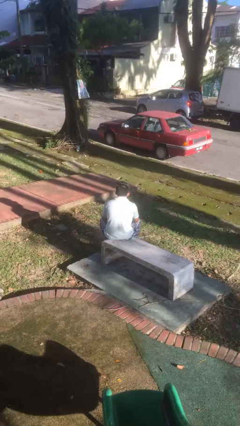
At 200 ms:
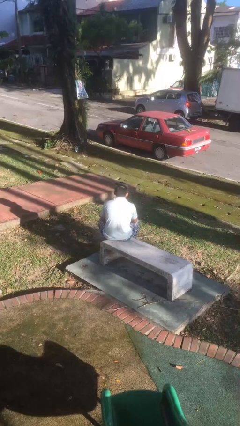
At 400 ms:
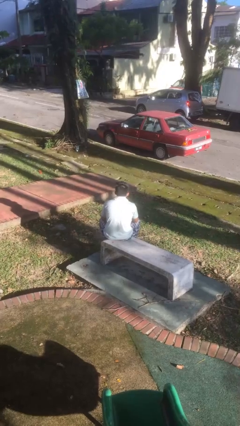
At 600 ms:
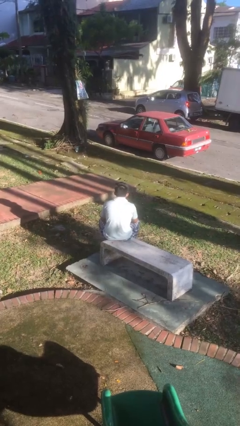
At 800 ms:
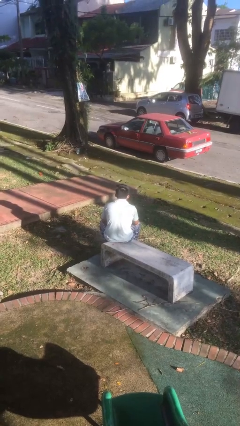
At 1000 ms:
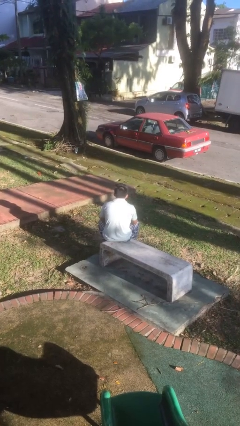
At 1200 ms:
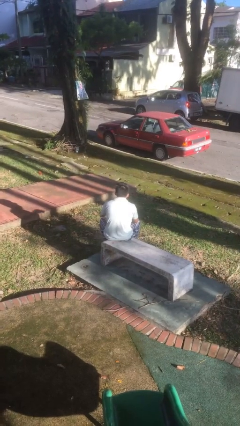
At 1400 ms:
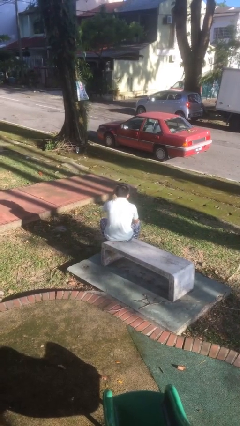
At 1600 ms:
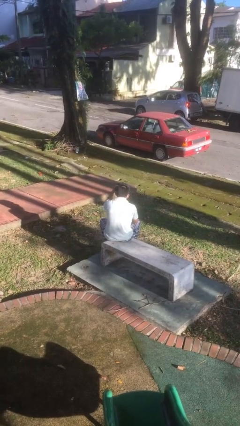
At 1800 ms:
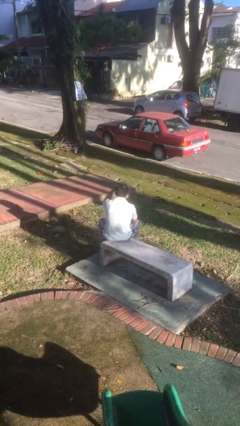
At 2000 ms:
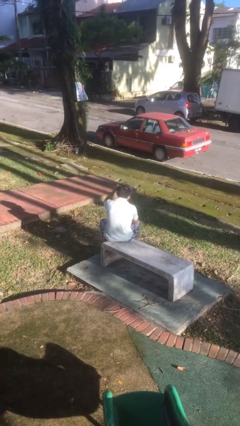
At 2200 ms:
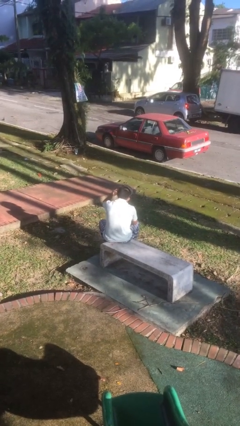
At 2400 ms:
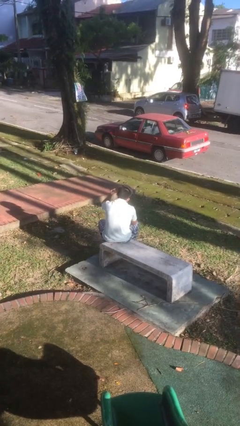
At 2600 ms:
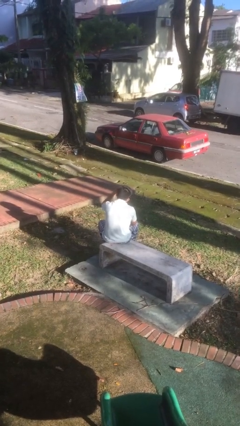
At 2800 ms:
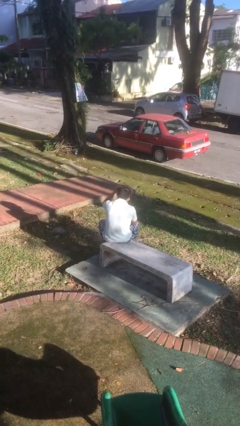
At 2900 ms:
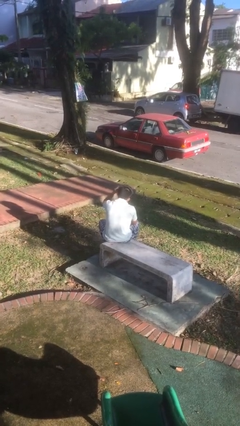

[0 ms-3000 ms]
person strokes hair

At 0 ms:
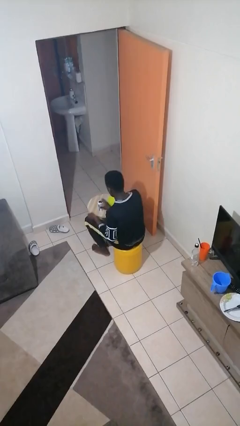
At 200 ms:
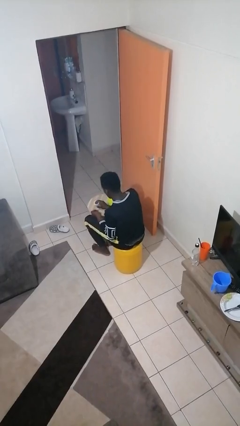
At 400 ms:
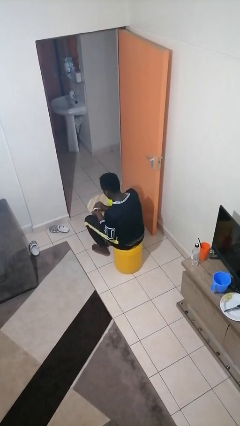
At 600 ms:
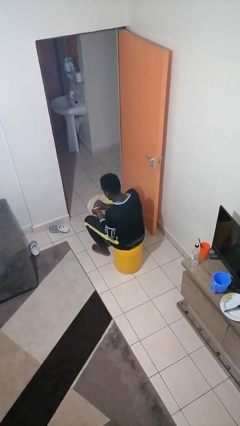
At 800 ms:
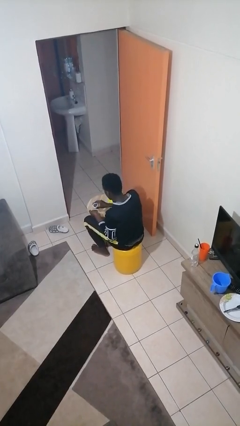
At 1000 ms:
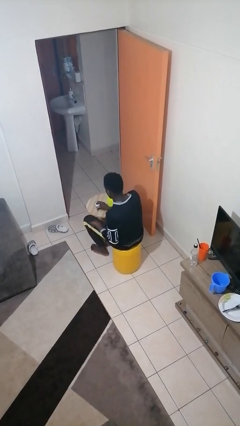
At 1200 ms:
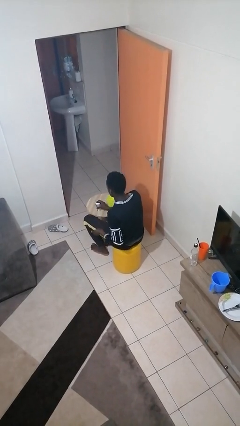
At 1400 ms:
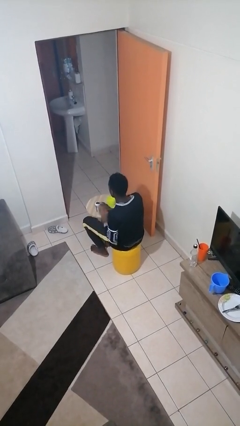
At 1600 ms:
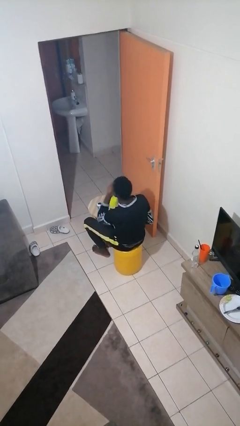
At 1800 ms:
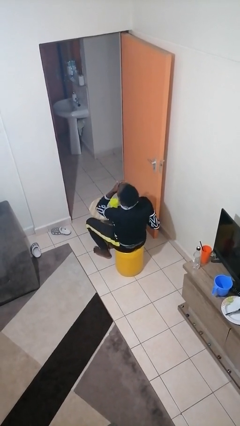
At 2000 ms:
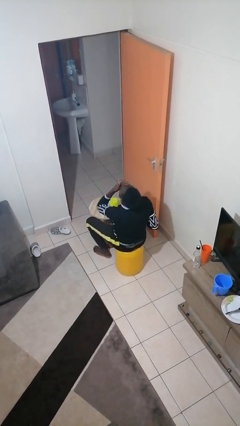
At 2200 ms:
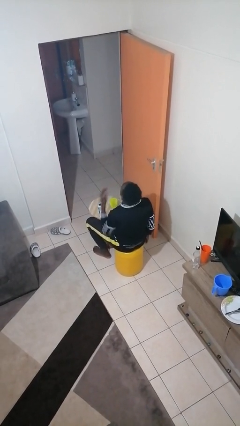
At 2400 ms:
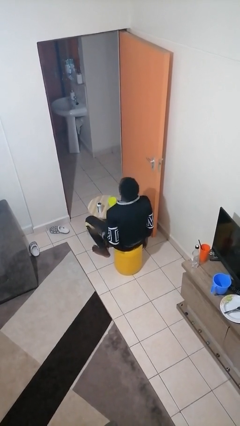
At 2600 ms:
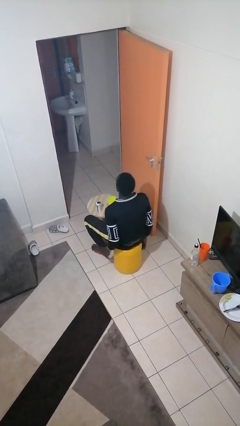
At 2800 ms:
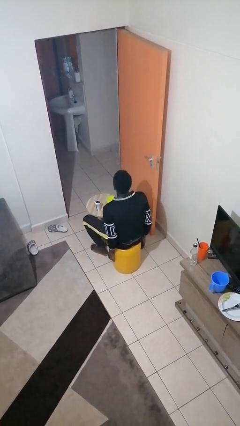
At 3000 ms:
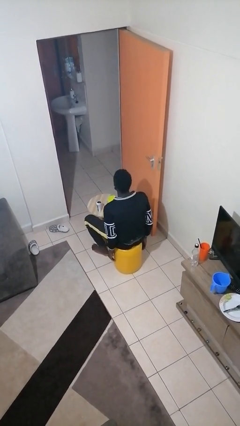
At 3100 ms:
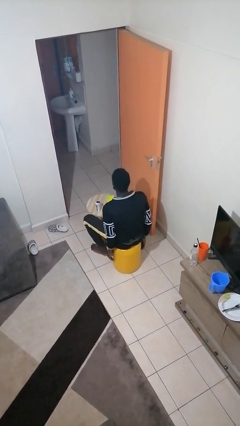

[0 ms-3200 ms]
person takes medicine pills

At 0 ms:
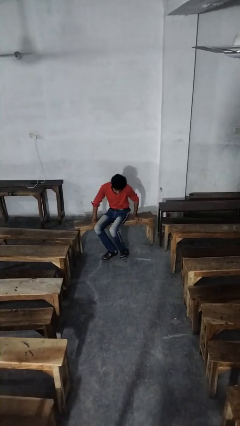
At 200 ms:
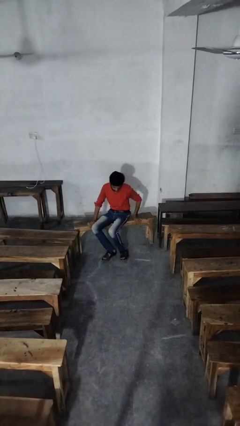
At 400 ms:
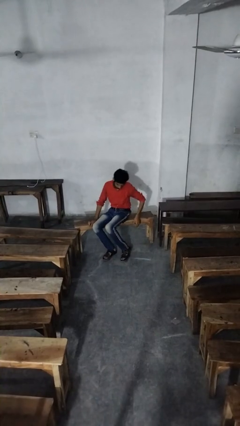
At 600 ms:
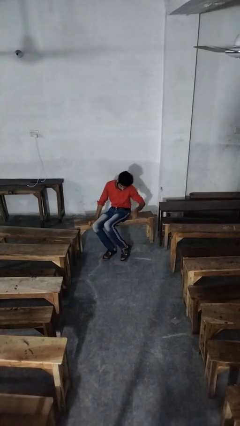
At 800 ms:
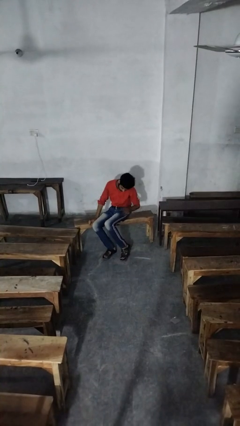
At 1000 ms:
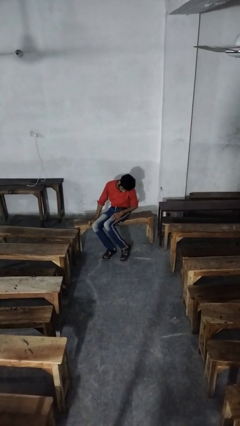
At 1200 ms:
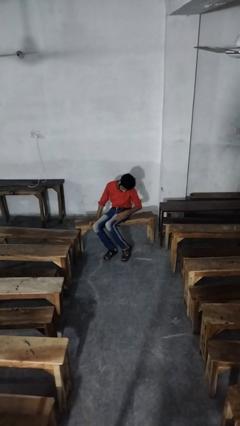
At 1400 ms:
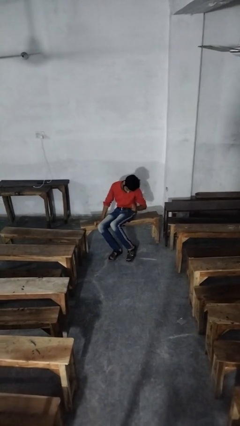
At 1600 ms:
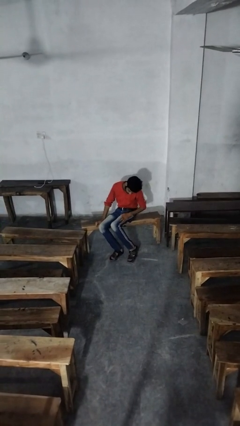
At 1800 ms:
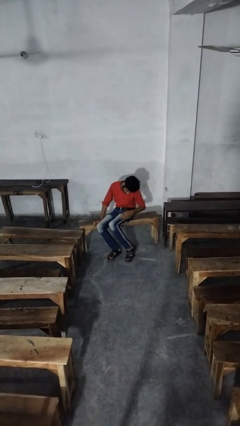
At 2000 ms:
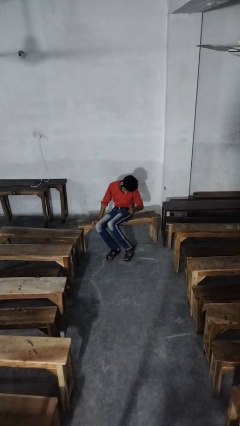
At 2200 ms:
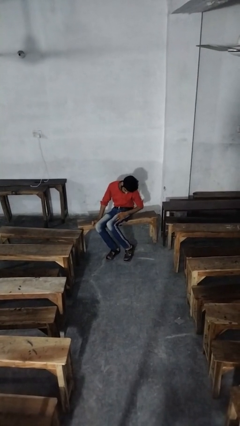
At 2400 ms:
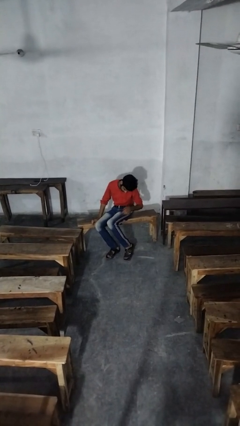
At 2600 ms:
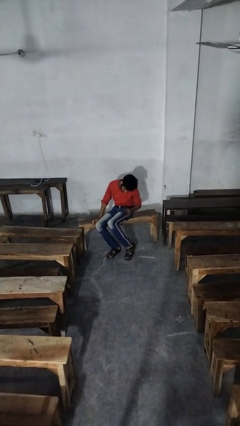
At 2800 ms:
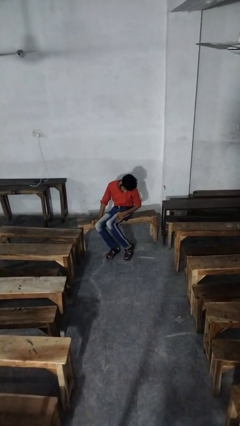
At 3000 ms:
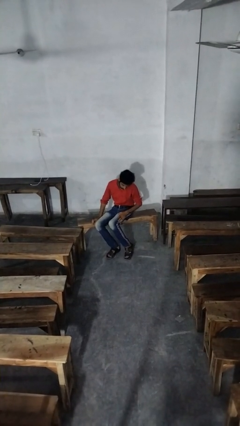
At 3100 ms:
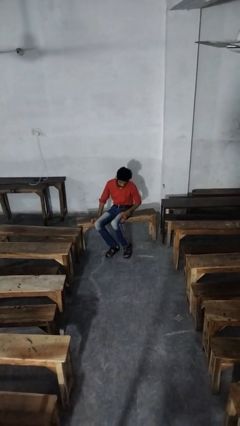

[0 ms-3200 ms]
person slaps hands on thighs

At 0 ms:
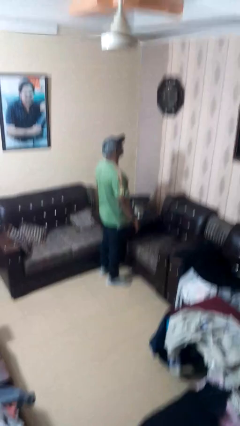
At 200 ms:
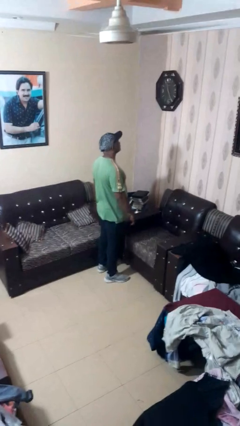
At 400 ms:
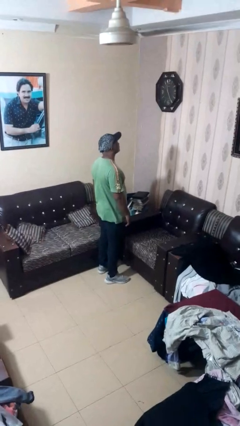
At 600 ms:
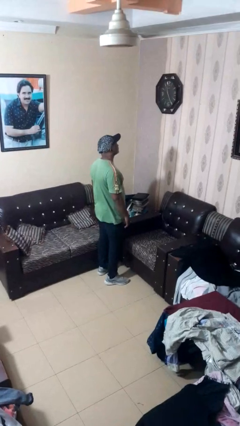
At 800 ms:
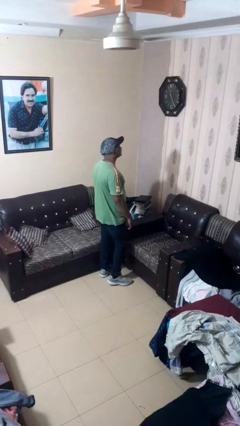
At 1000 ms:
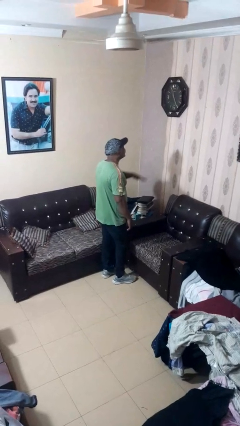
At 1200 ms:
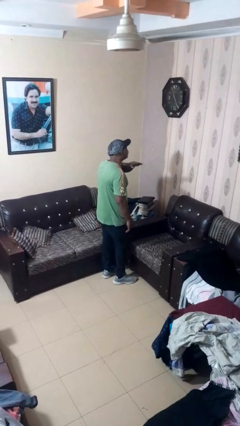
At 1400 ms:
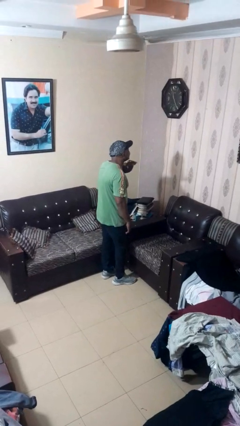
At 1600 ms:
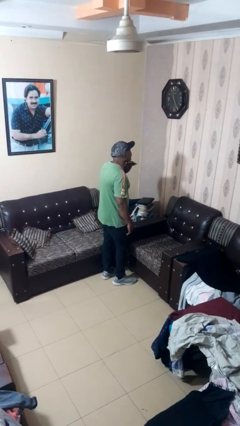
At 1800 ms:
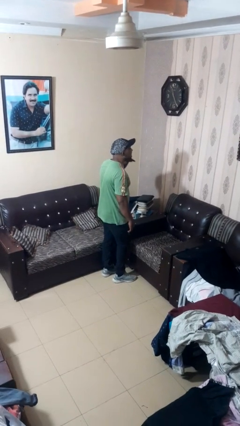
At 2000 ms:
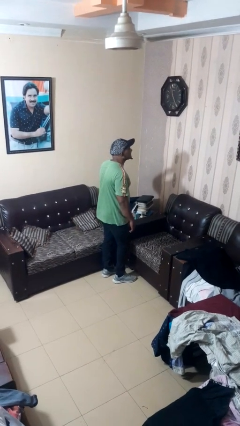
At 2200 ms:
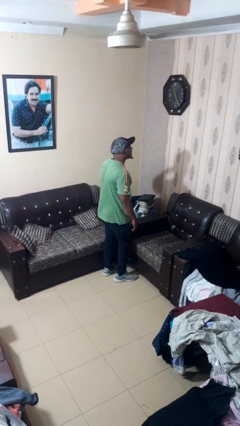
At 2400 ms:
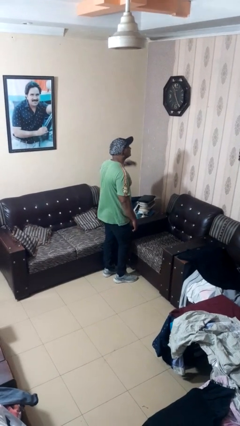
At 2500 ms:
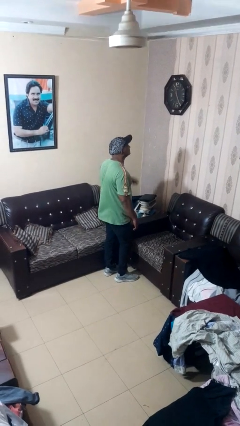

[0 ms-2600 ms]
person gestures cut

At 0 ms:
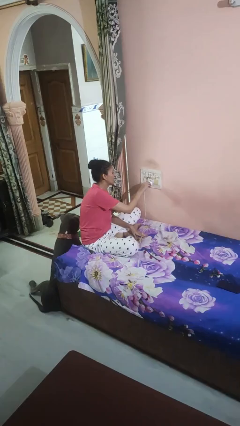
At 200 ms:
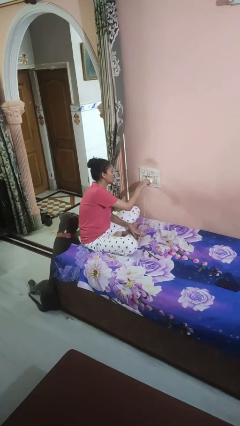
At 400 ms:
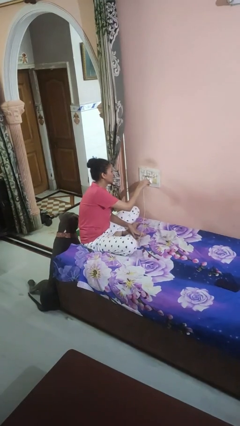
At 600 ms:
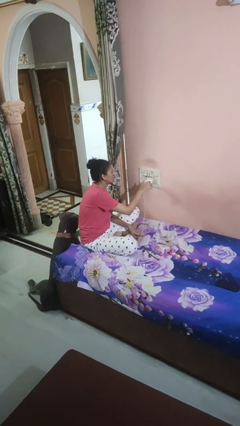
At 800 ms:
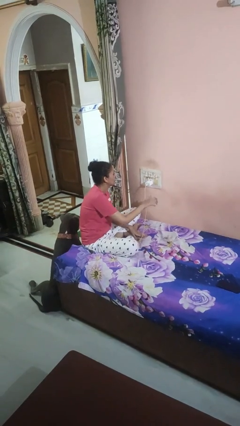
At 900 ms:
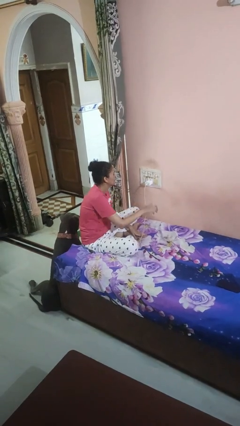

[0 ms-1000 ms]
person plugs into electrical socket

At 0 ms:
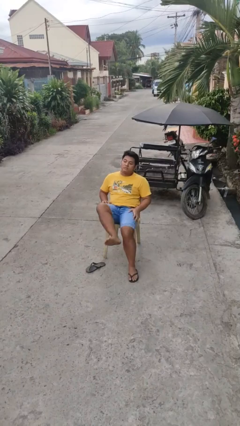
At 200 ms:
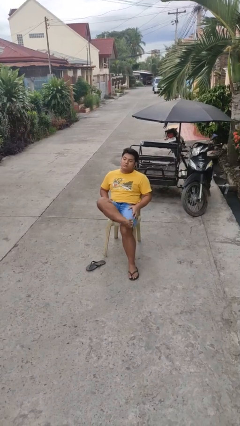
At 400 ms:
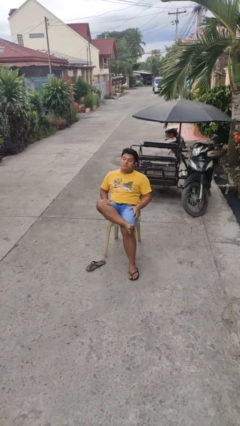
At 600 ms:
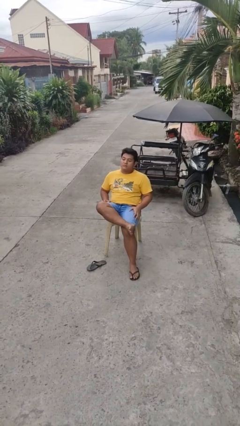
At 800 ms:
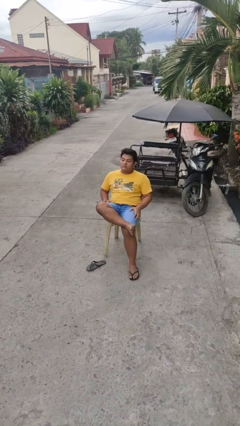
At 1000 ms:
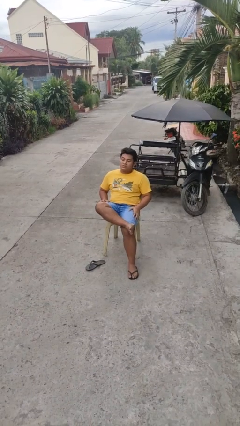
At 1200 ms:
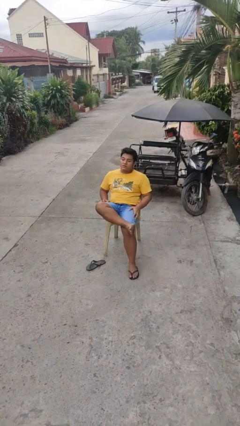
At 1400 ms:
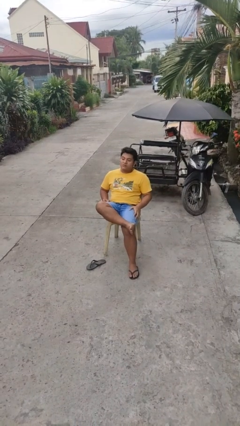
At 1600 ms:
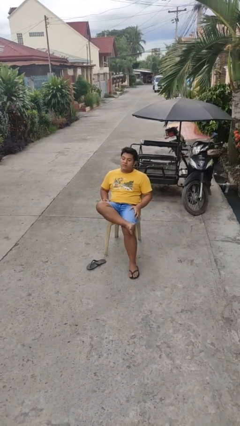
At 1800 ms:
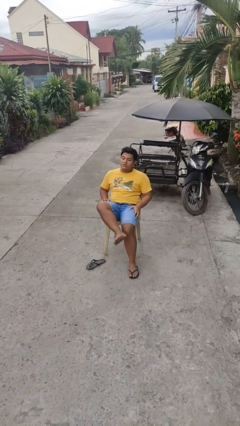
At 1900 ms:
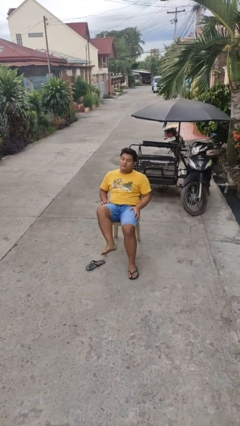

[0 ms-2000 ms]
person crosses legs

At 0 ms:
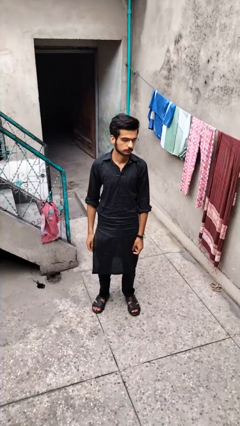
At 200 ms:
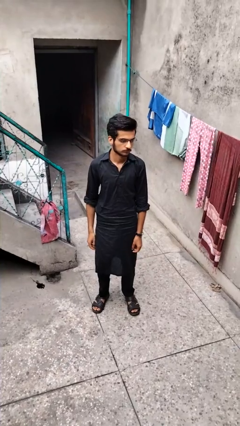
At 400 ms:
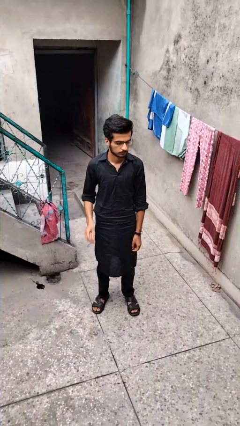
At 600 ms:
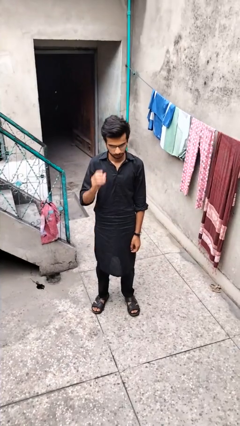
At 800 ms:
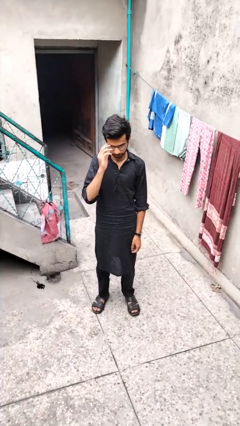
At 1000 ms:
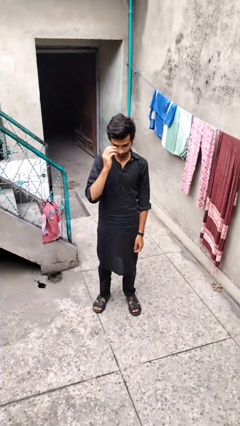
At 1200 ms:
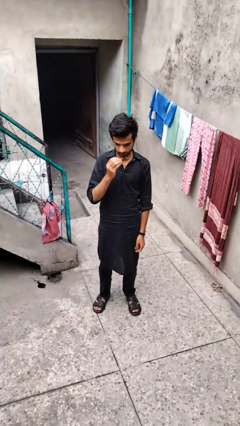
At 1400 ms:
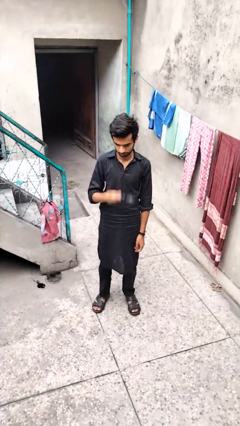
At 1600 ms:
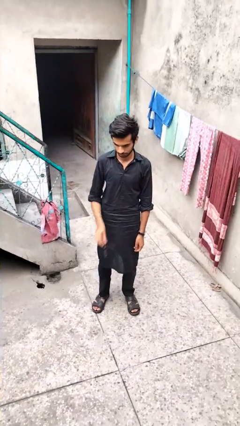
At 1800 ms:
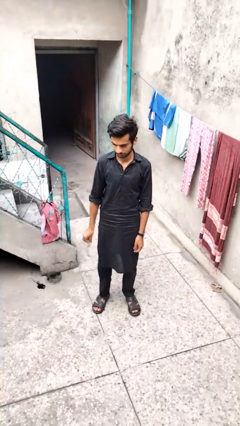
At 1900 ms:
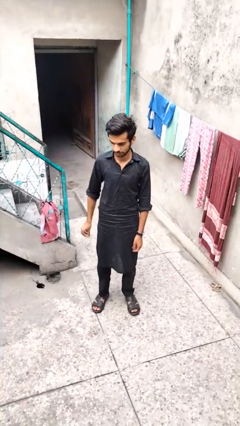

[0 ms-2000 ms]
person takes off glasses

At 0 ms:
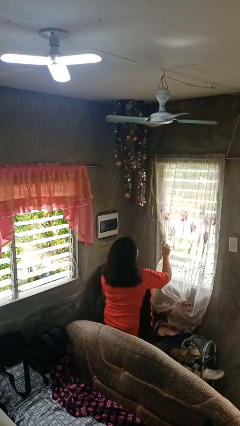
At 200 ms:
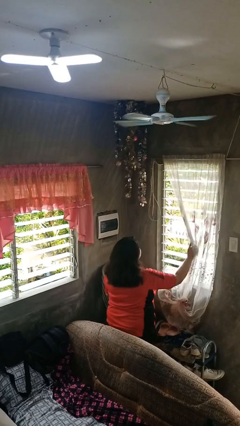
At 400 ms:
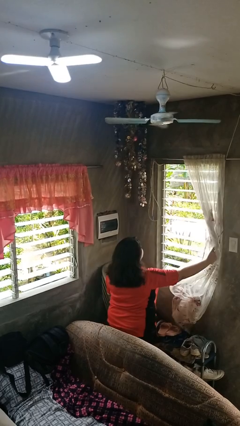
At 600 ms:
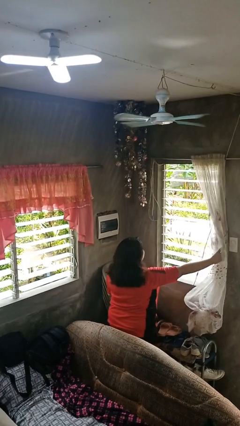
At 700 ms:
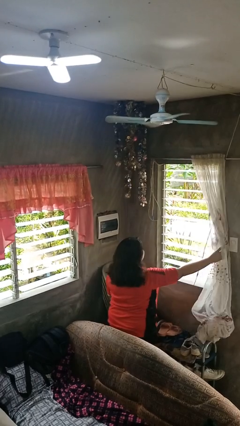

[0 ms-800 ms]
person opens curtains
